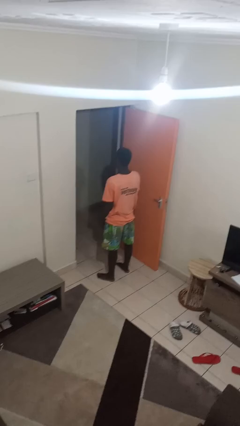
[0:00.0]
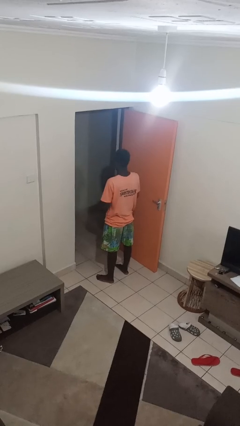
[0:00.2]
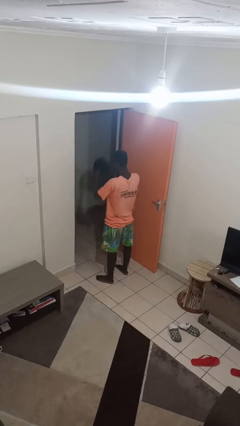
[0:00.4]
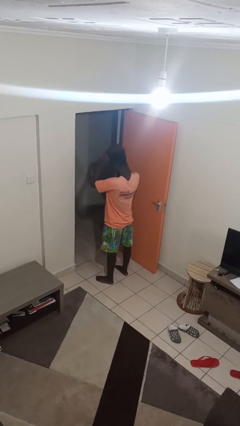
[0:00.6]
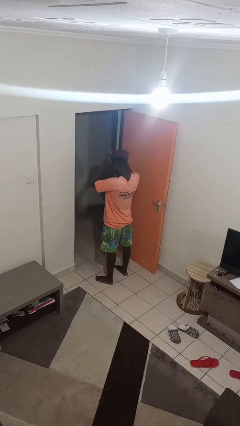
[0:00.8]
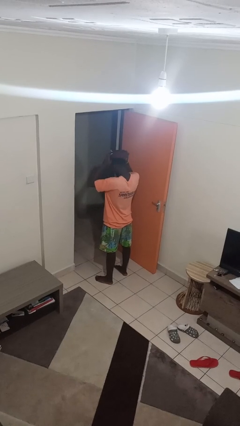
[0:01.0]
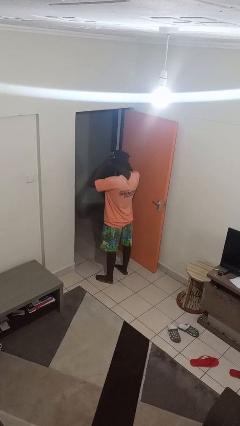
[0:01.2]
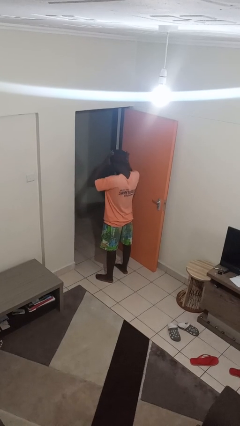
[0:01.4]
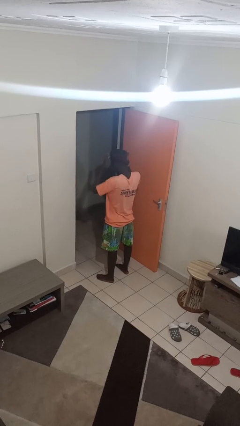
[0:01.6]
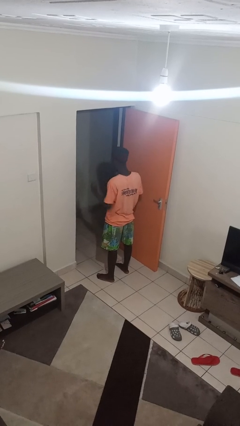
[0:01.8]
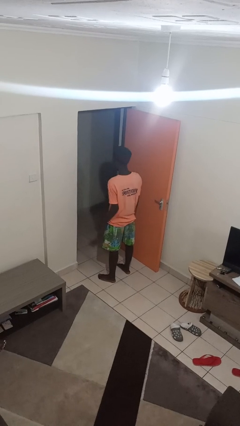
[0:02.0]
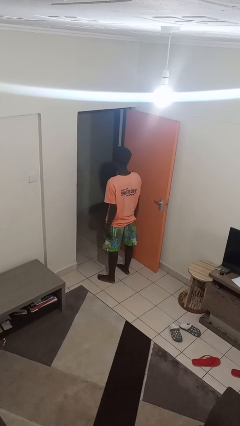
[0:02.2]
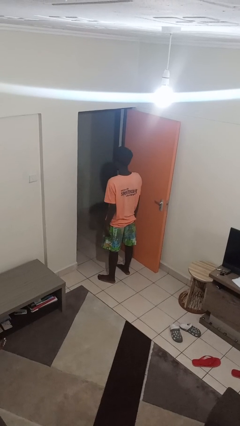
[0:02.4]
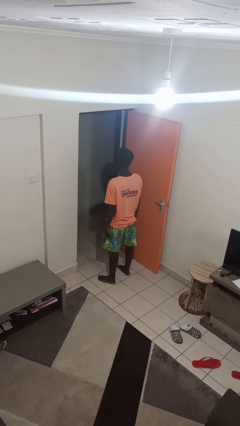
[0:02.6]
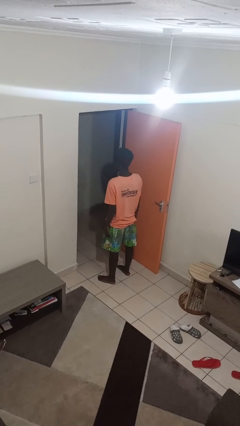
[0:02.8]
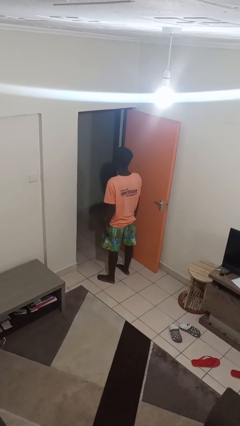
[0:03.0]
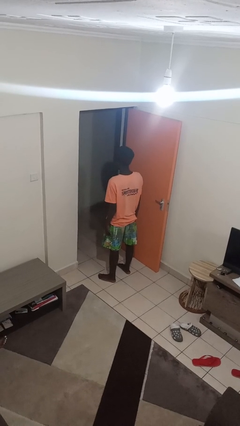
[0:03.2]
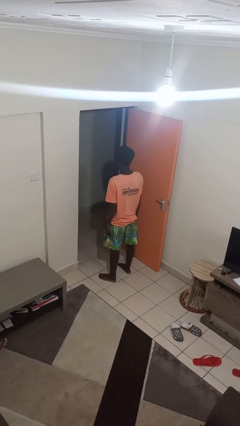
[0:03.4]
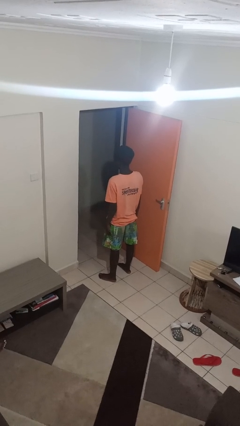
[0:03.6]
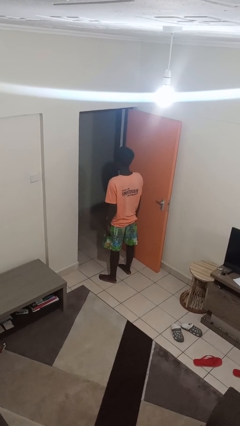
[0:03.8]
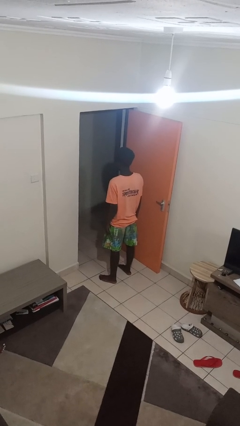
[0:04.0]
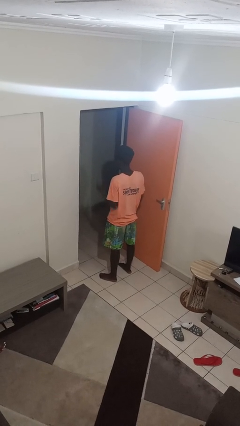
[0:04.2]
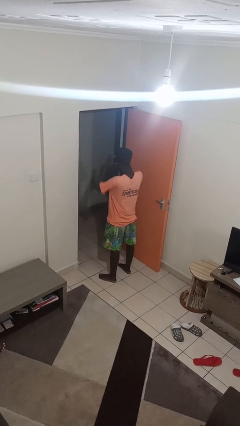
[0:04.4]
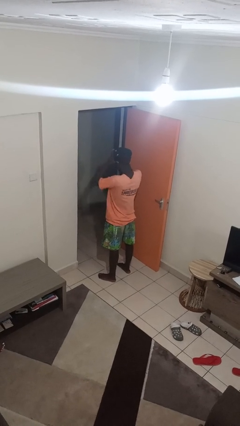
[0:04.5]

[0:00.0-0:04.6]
person puts on hat

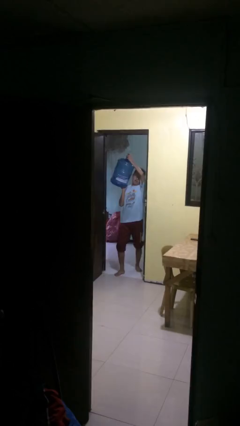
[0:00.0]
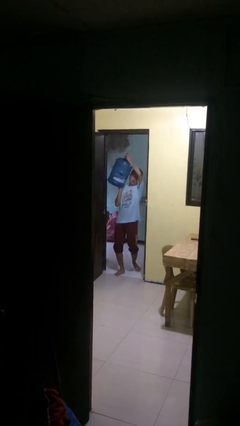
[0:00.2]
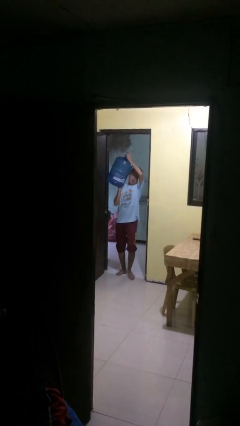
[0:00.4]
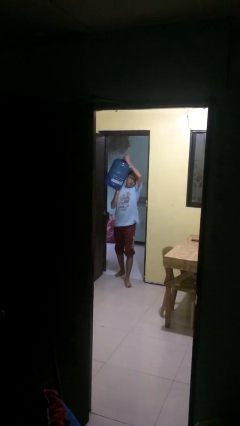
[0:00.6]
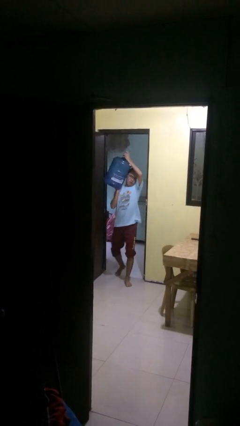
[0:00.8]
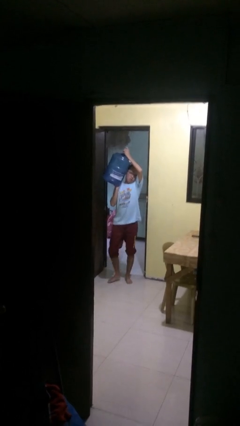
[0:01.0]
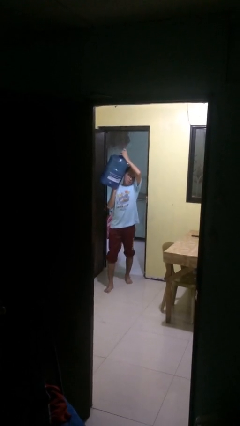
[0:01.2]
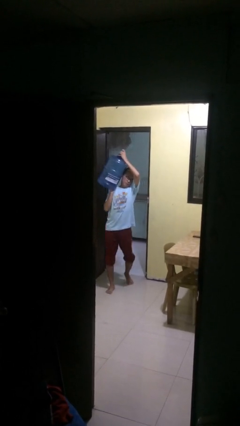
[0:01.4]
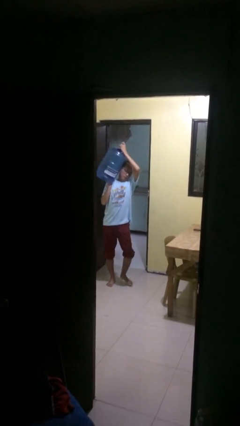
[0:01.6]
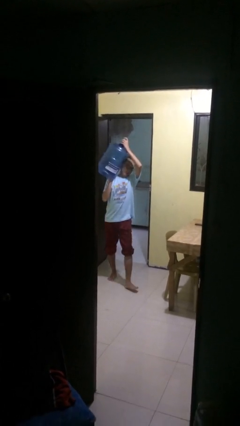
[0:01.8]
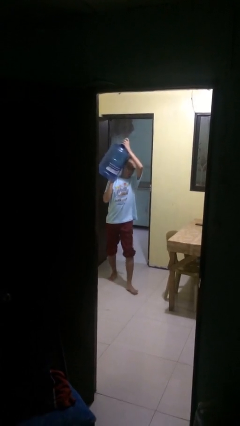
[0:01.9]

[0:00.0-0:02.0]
person carries heavy object

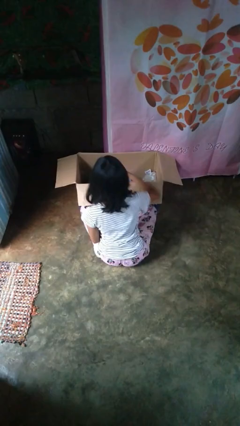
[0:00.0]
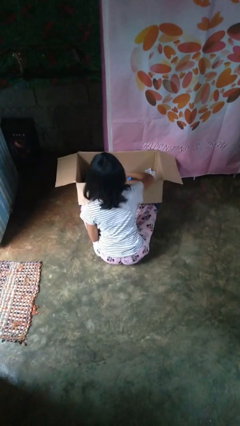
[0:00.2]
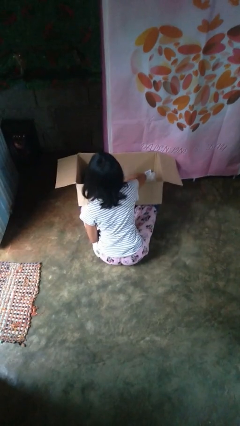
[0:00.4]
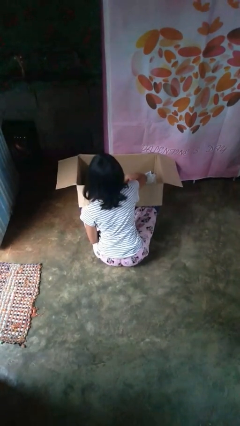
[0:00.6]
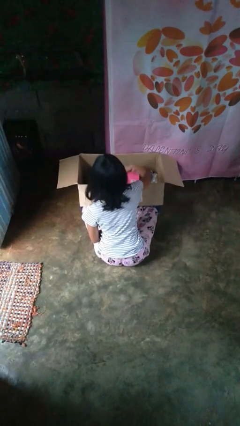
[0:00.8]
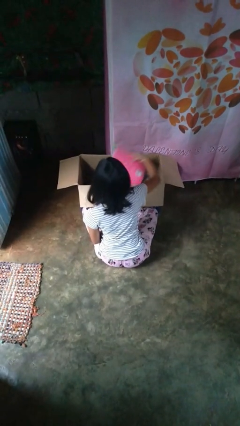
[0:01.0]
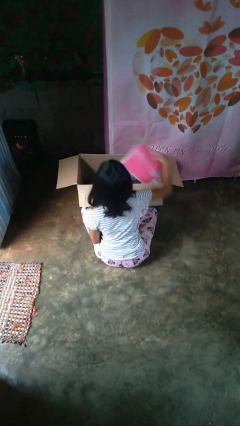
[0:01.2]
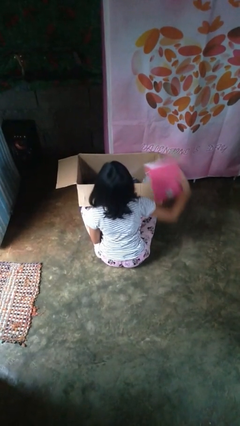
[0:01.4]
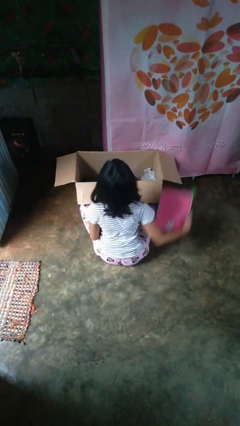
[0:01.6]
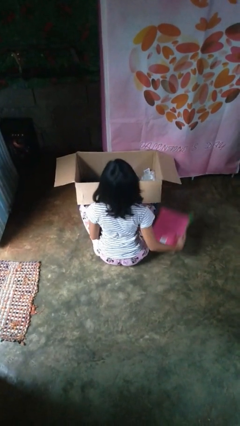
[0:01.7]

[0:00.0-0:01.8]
person takes object from box

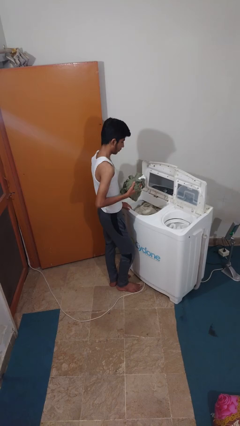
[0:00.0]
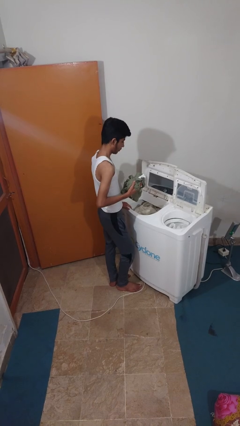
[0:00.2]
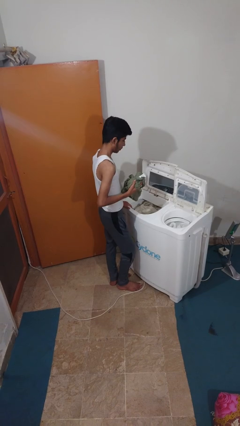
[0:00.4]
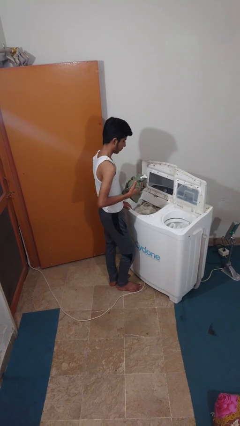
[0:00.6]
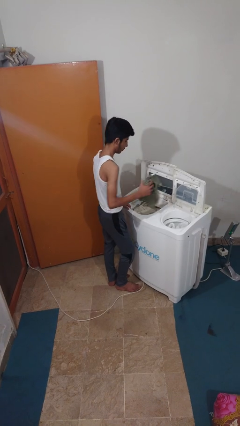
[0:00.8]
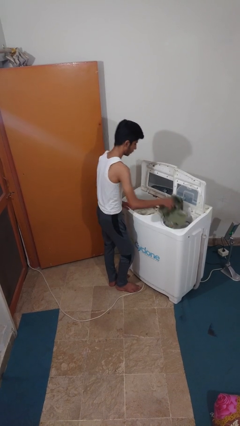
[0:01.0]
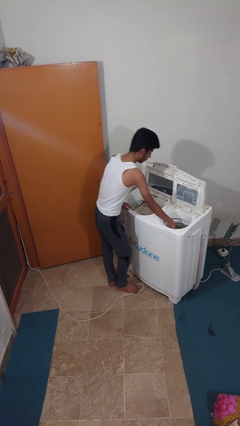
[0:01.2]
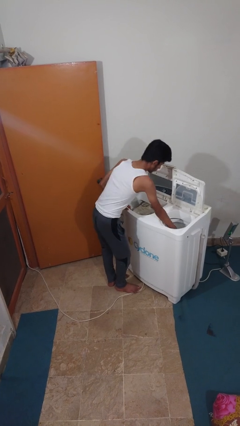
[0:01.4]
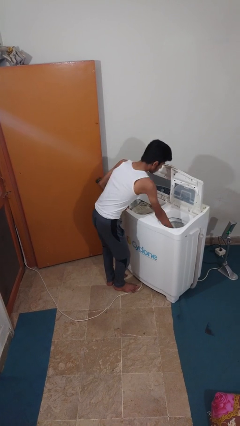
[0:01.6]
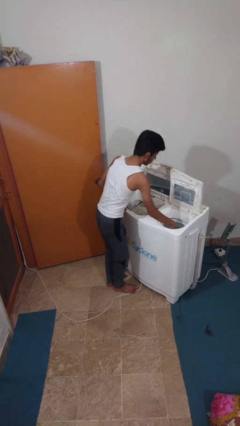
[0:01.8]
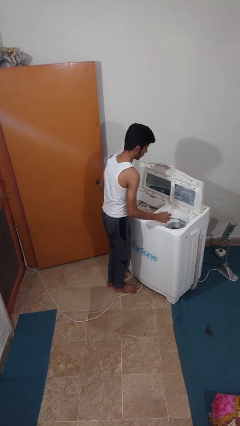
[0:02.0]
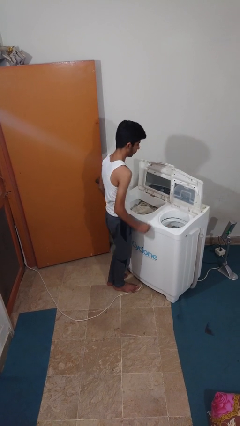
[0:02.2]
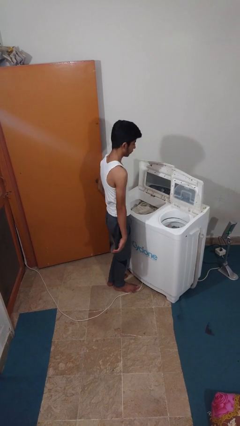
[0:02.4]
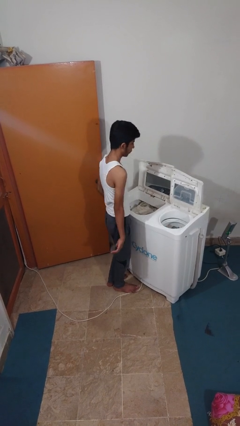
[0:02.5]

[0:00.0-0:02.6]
person loads dryer

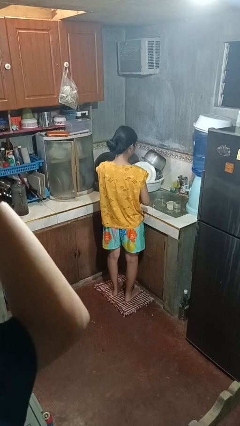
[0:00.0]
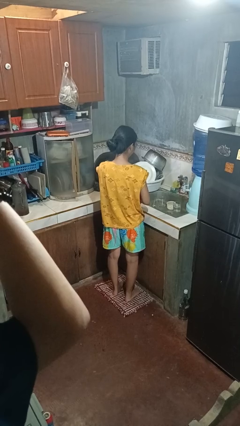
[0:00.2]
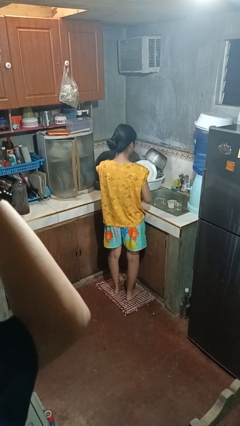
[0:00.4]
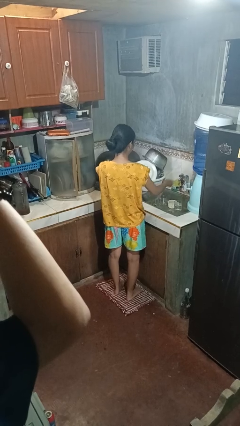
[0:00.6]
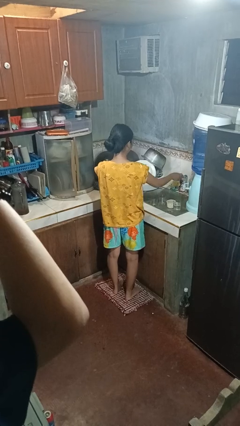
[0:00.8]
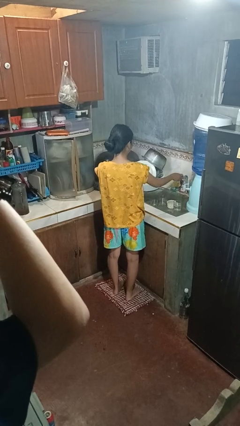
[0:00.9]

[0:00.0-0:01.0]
person turns off faucet

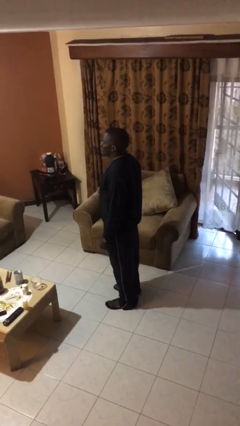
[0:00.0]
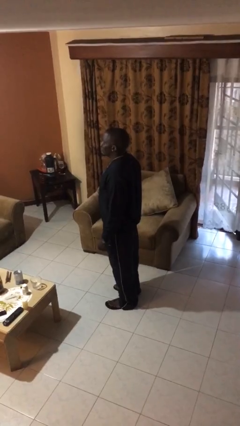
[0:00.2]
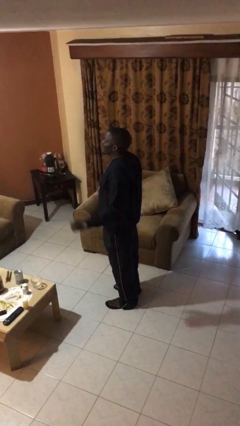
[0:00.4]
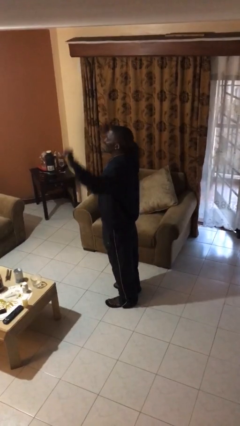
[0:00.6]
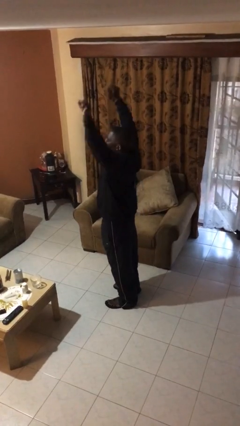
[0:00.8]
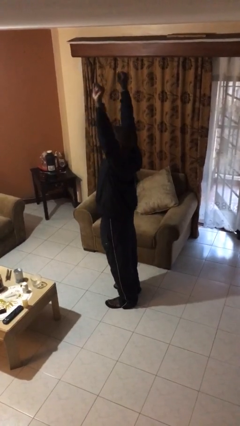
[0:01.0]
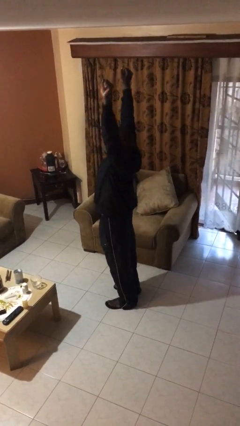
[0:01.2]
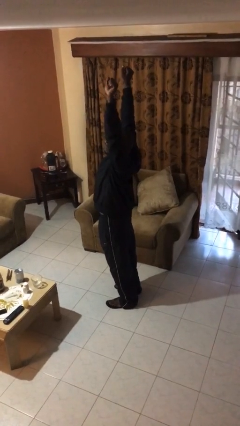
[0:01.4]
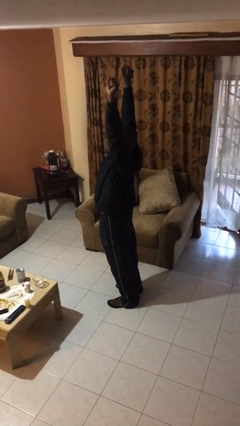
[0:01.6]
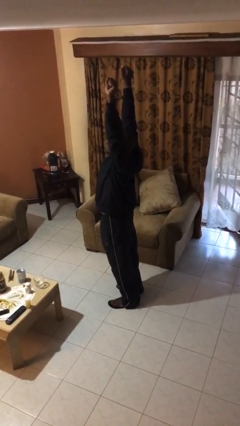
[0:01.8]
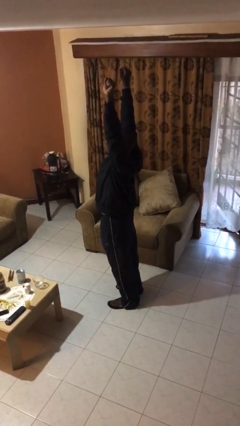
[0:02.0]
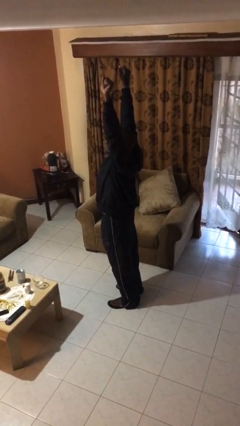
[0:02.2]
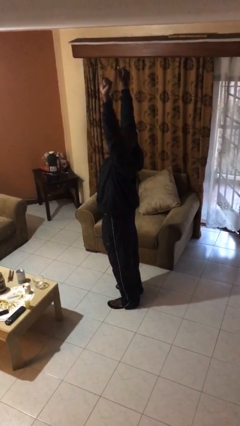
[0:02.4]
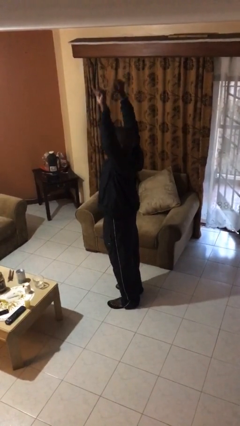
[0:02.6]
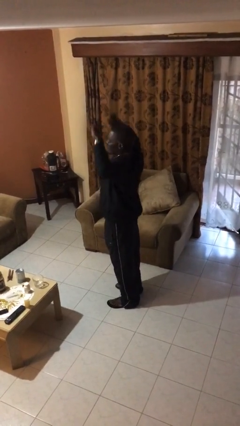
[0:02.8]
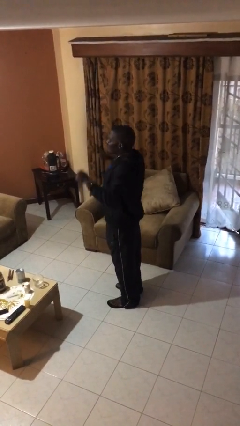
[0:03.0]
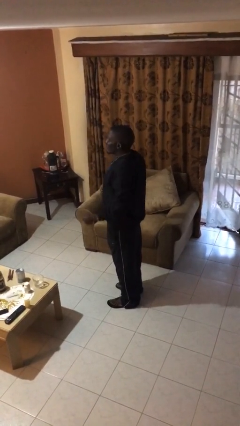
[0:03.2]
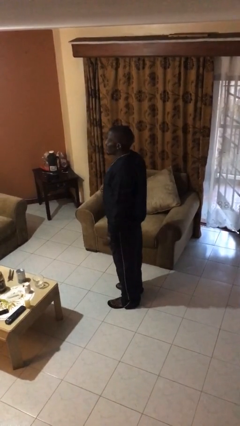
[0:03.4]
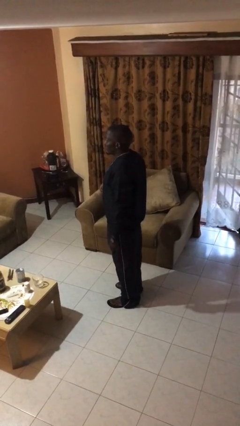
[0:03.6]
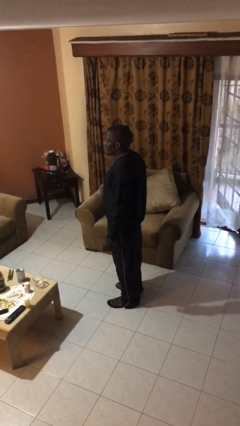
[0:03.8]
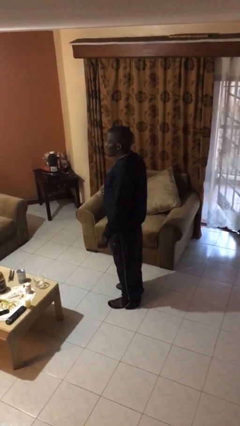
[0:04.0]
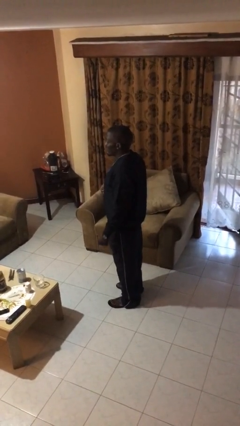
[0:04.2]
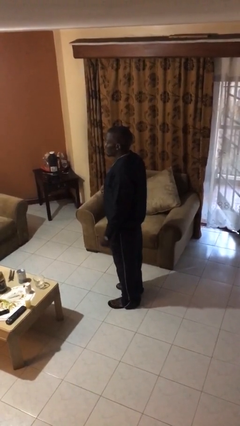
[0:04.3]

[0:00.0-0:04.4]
person stretches arms over head

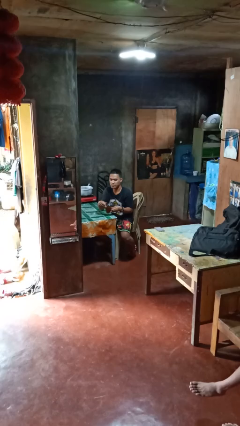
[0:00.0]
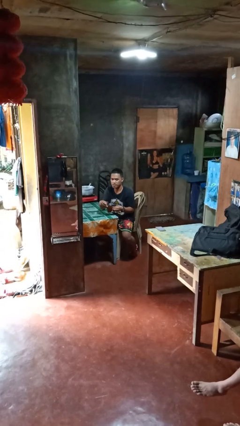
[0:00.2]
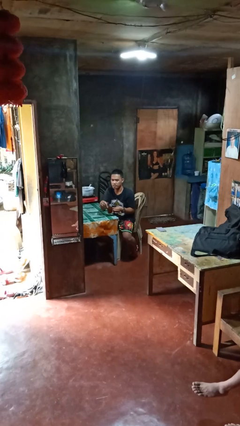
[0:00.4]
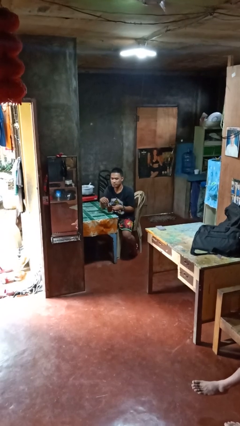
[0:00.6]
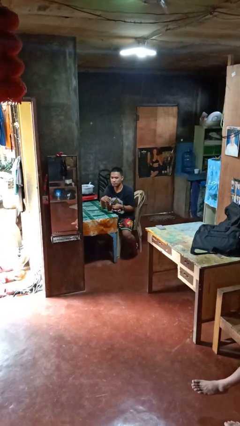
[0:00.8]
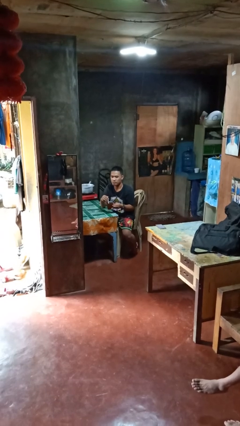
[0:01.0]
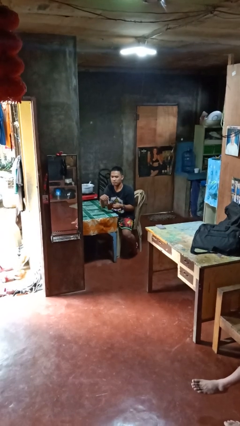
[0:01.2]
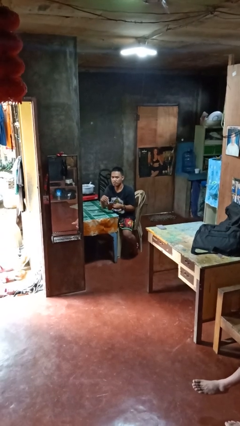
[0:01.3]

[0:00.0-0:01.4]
person stirs mug
